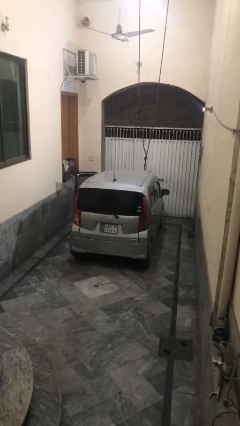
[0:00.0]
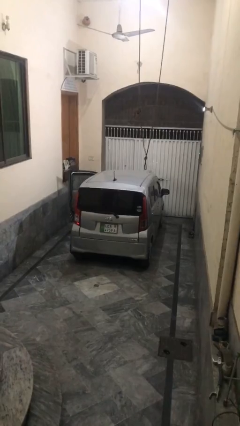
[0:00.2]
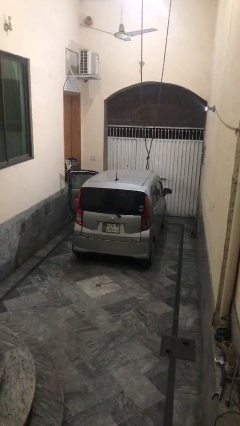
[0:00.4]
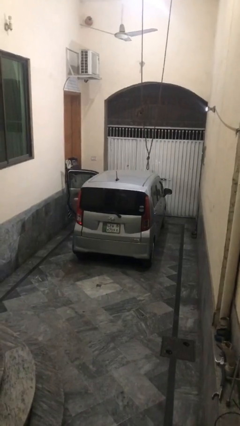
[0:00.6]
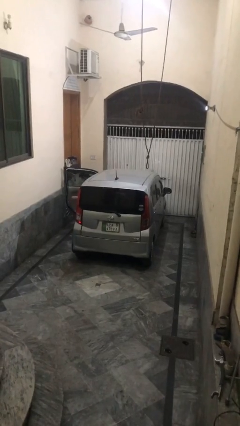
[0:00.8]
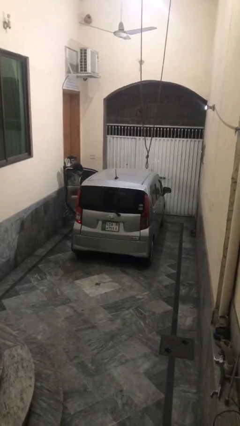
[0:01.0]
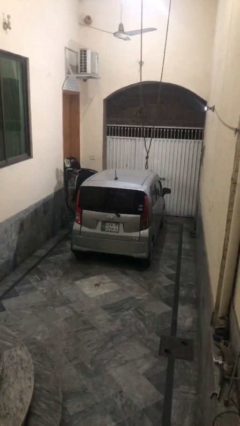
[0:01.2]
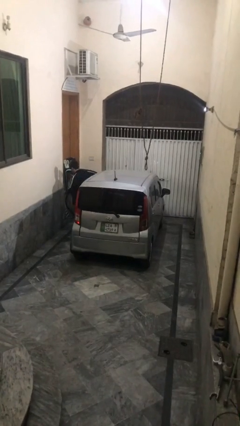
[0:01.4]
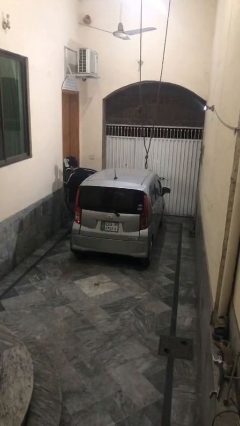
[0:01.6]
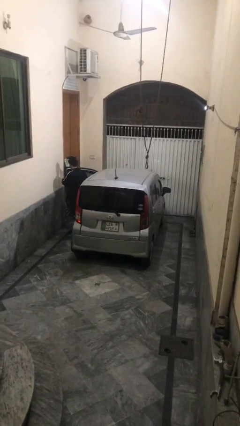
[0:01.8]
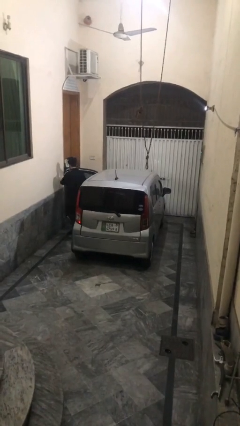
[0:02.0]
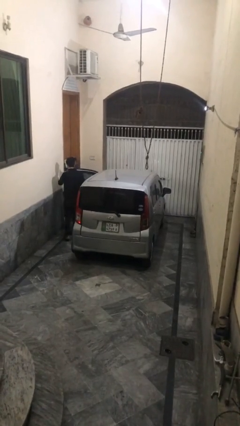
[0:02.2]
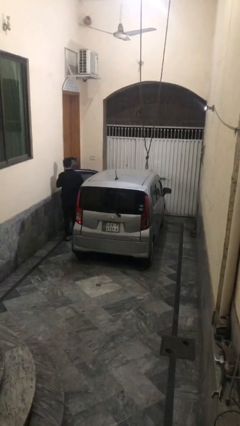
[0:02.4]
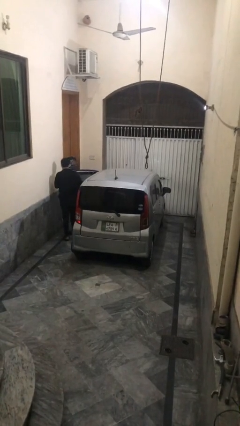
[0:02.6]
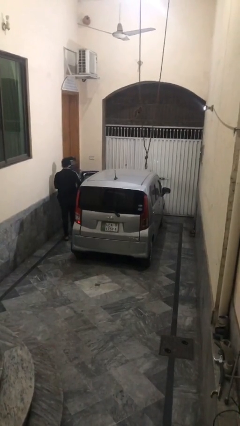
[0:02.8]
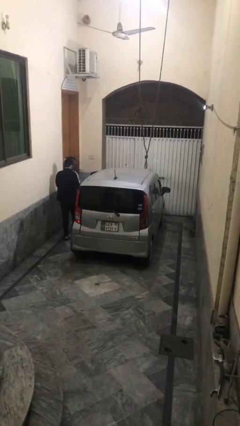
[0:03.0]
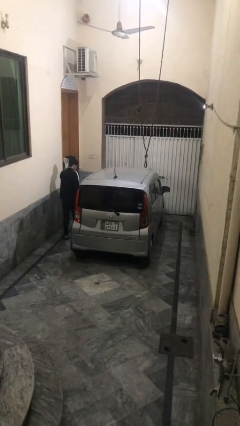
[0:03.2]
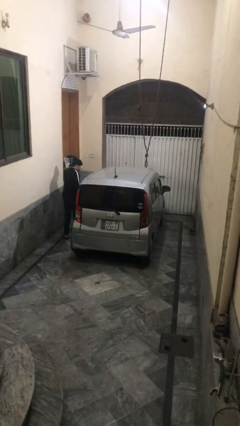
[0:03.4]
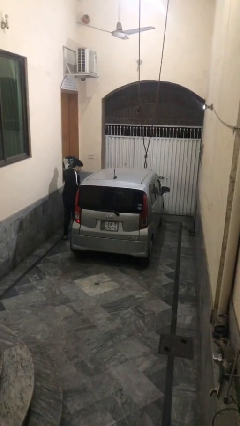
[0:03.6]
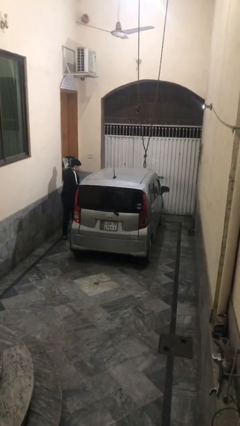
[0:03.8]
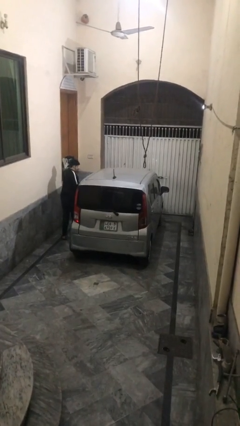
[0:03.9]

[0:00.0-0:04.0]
car drops off person

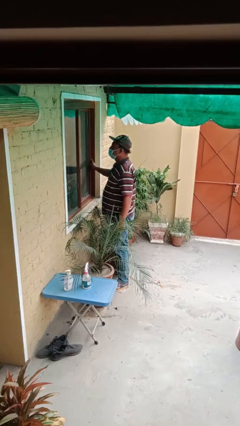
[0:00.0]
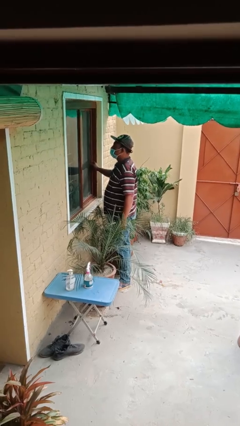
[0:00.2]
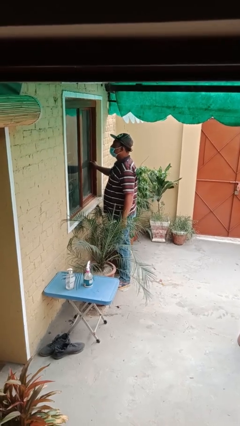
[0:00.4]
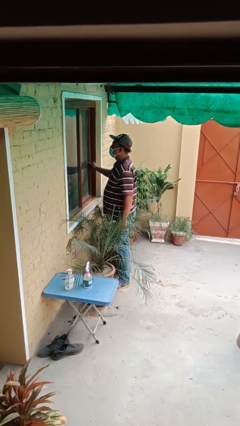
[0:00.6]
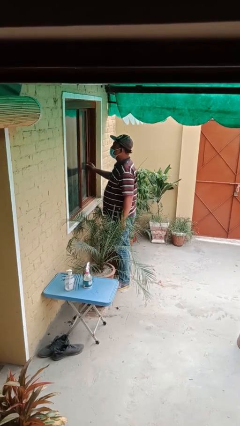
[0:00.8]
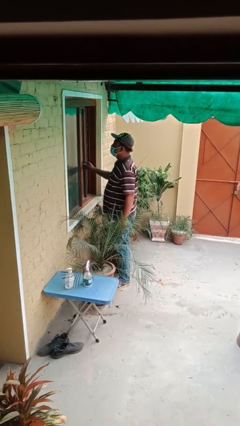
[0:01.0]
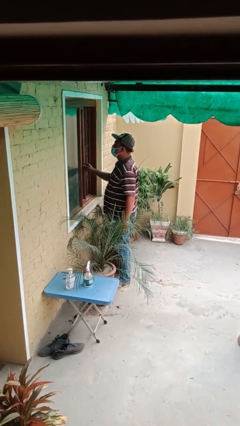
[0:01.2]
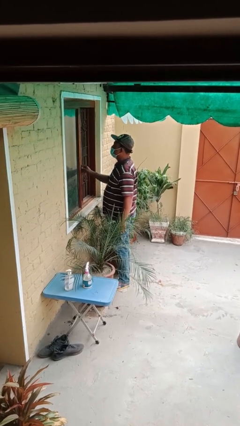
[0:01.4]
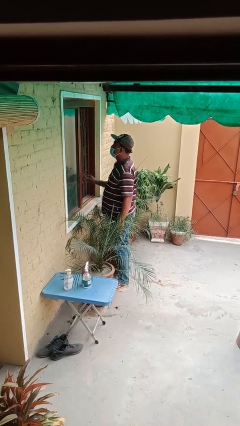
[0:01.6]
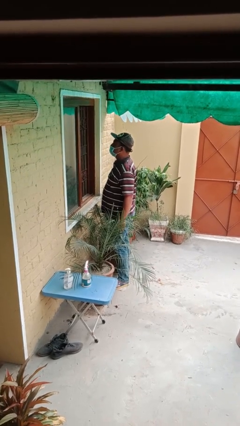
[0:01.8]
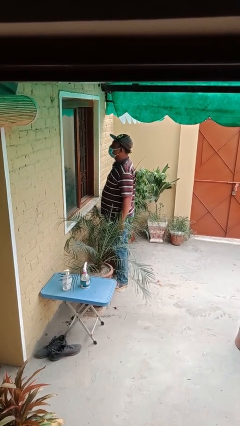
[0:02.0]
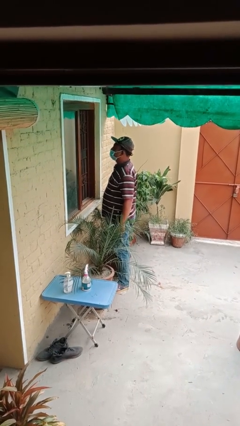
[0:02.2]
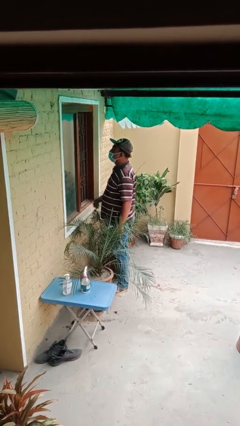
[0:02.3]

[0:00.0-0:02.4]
person opens home window

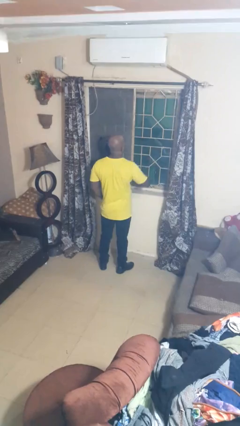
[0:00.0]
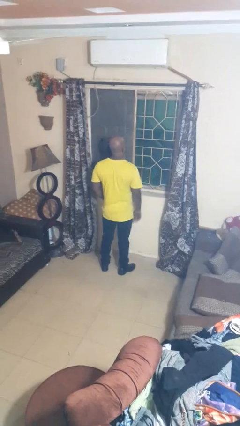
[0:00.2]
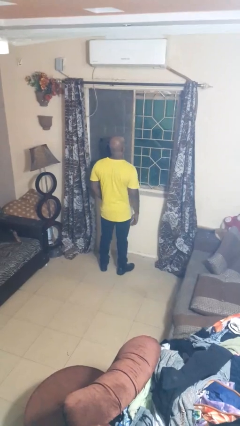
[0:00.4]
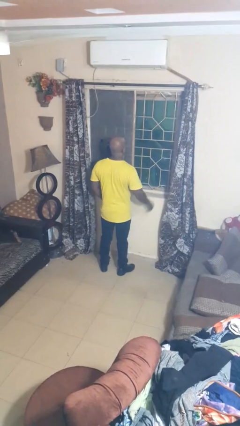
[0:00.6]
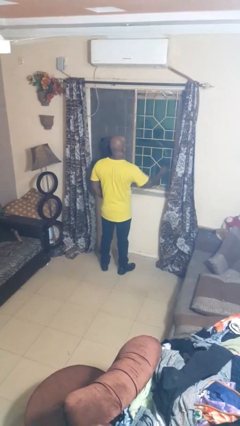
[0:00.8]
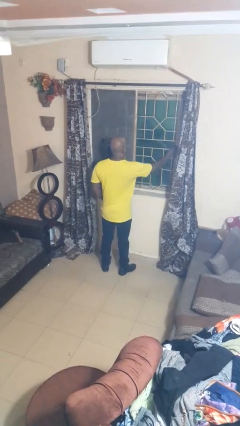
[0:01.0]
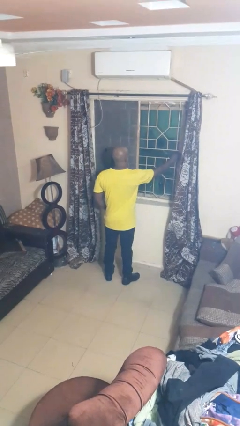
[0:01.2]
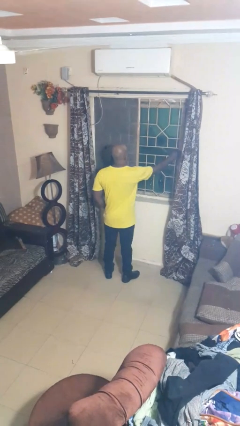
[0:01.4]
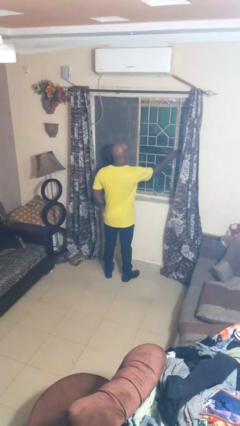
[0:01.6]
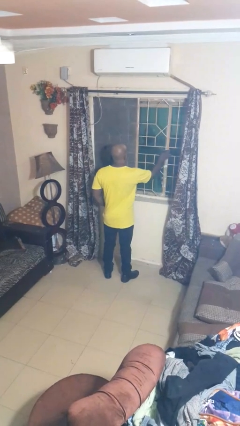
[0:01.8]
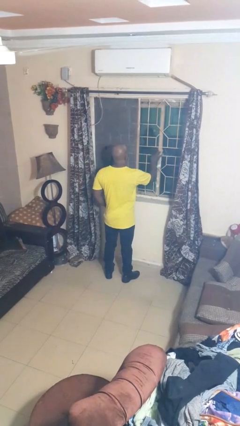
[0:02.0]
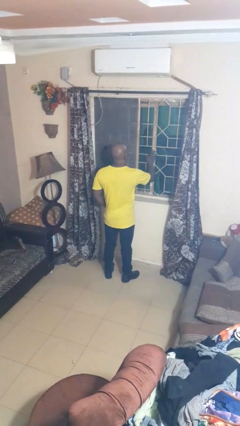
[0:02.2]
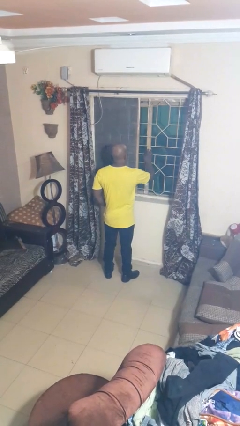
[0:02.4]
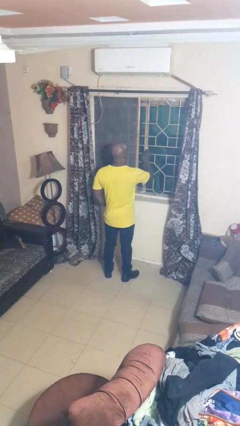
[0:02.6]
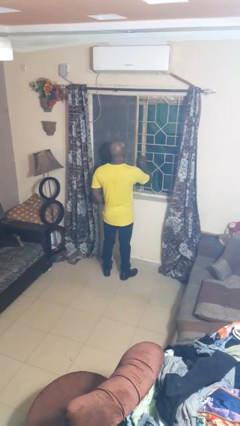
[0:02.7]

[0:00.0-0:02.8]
person closes home window

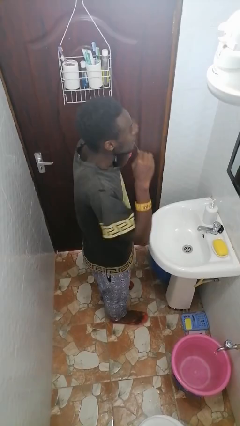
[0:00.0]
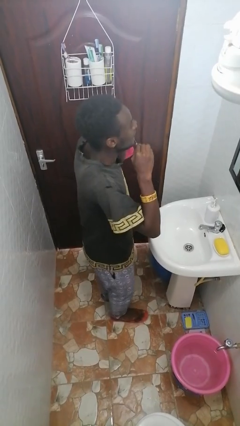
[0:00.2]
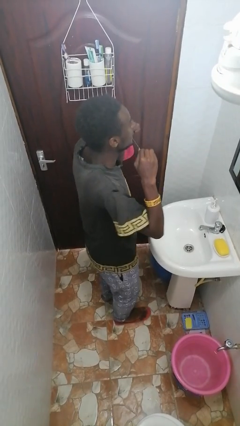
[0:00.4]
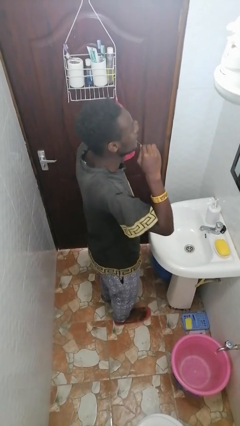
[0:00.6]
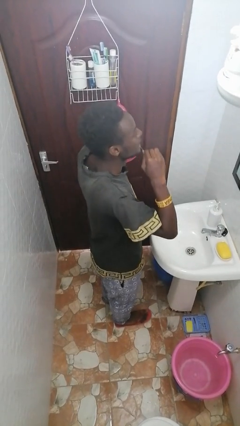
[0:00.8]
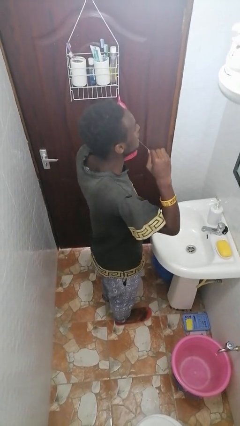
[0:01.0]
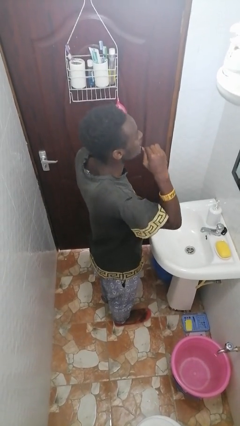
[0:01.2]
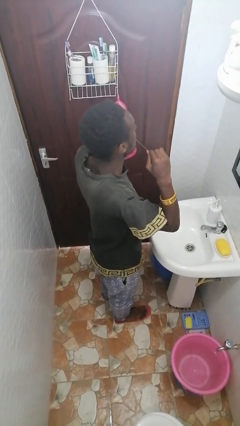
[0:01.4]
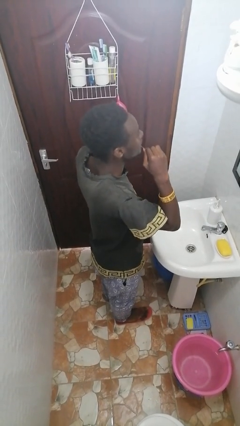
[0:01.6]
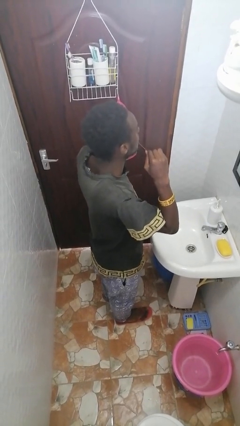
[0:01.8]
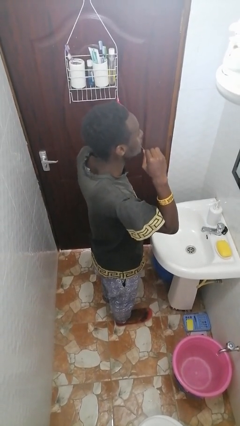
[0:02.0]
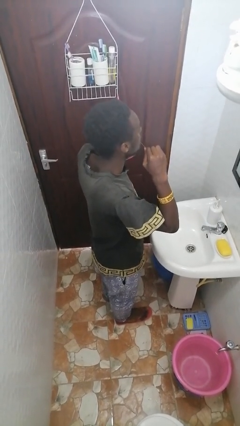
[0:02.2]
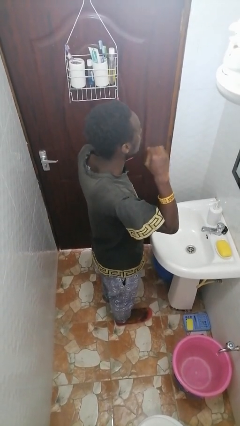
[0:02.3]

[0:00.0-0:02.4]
person flosses

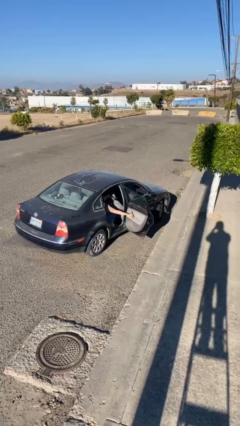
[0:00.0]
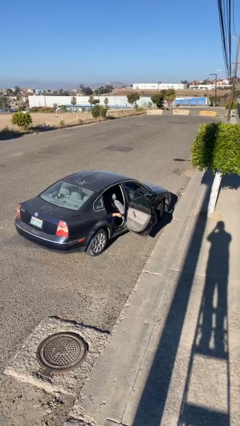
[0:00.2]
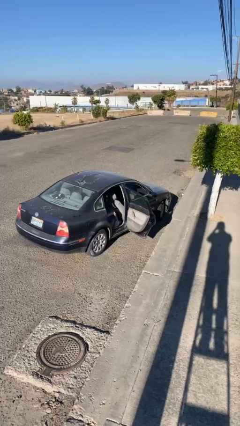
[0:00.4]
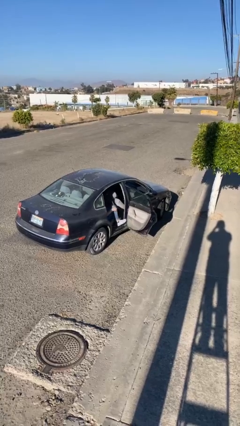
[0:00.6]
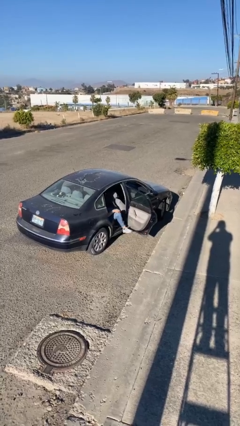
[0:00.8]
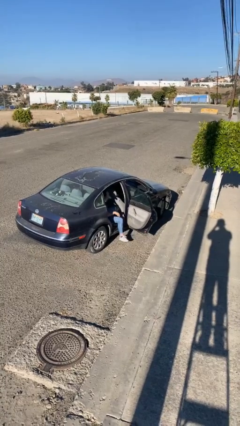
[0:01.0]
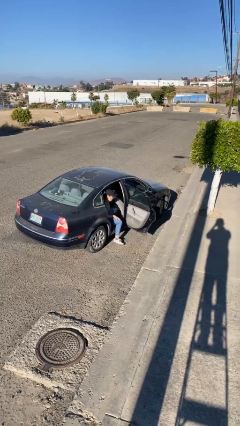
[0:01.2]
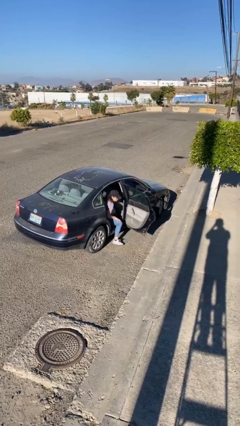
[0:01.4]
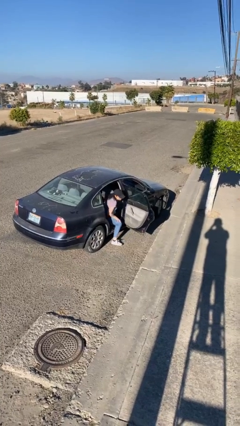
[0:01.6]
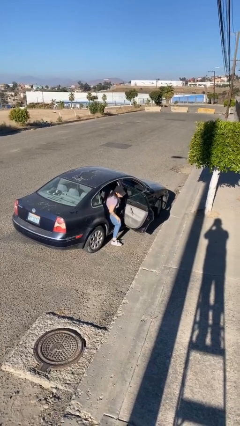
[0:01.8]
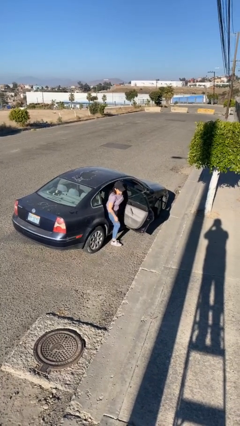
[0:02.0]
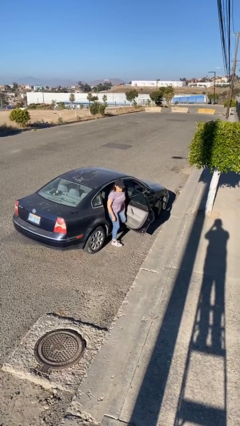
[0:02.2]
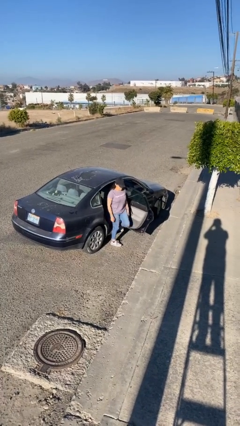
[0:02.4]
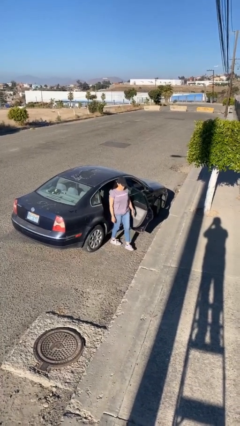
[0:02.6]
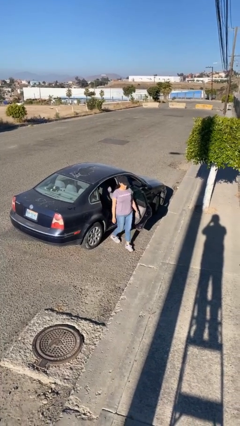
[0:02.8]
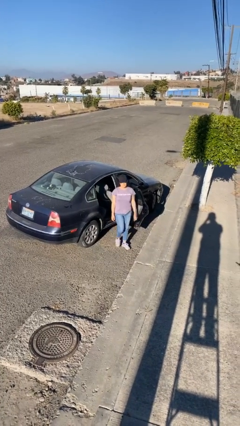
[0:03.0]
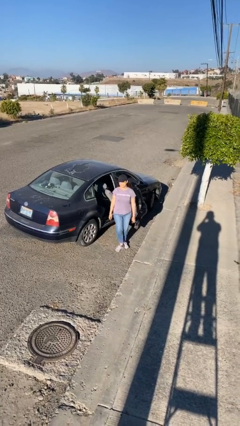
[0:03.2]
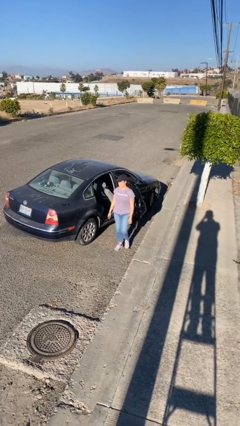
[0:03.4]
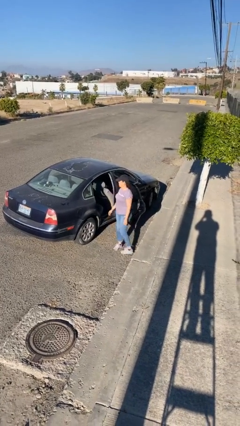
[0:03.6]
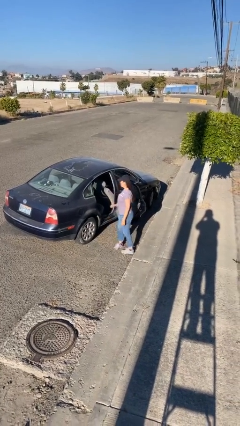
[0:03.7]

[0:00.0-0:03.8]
person exits car

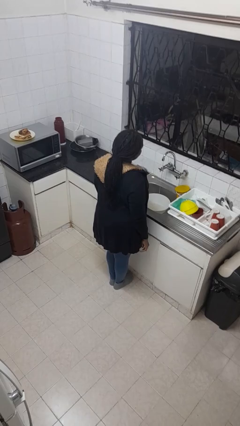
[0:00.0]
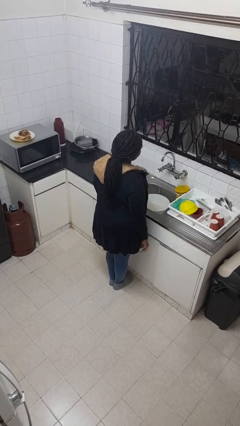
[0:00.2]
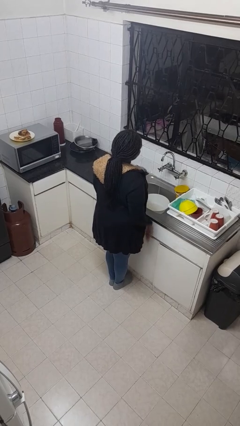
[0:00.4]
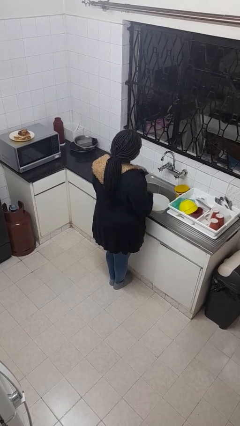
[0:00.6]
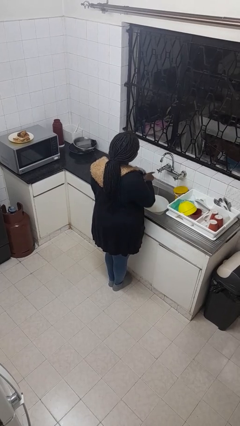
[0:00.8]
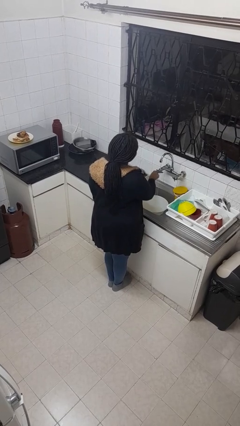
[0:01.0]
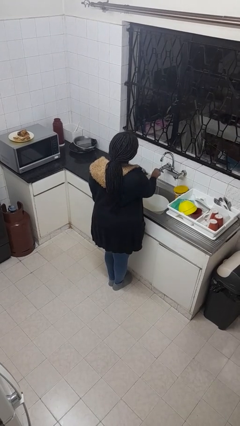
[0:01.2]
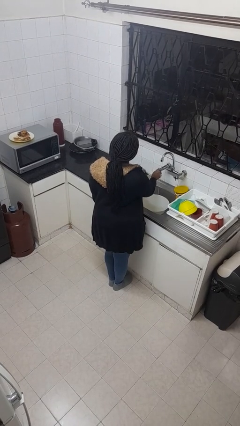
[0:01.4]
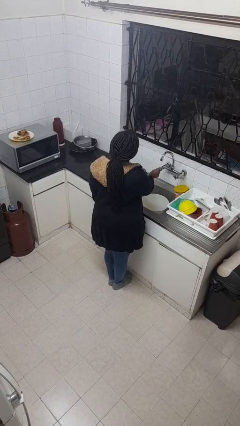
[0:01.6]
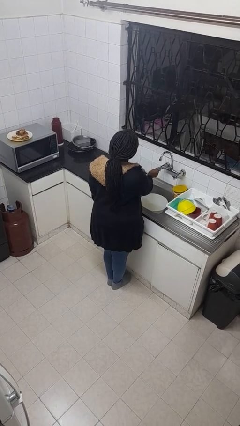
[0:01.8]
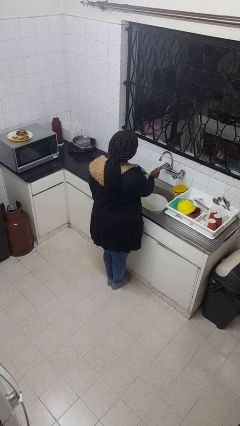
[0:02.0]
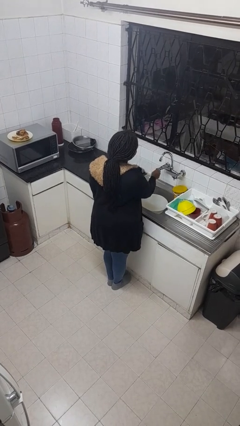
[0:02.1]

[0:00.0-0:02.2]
person turns off faucet
